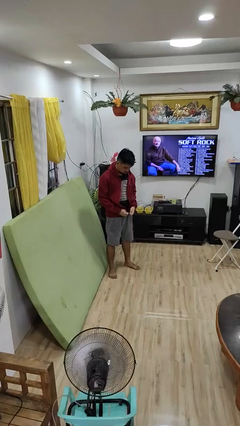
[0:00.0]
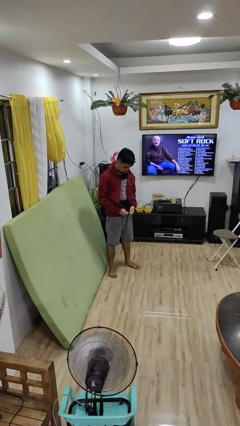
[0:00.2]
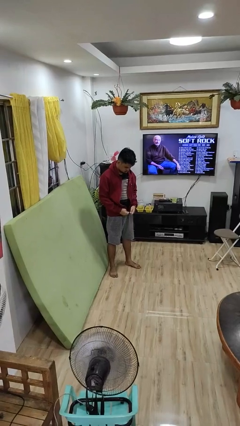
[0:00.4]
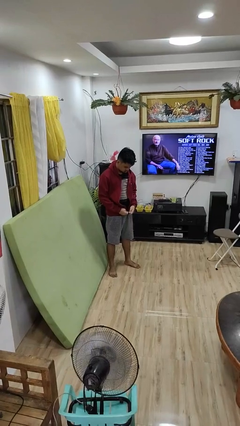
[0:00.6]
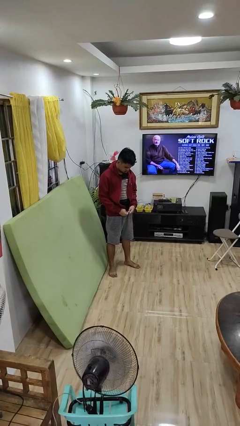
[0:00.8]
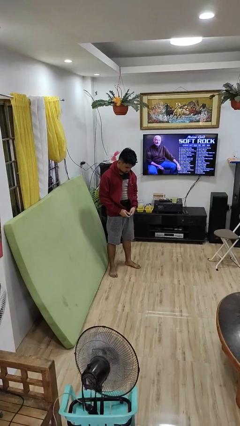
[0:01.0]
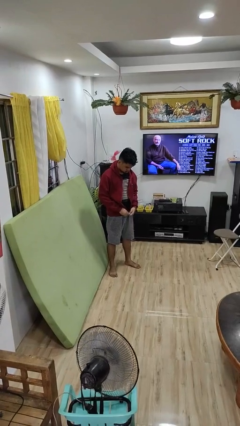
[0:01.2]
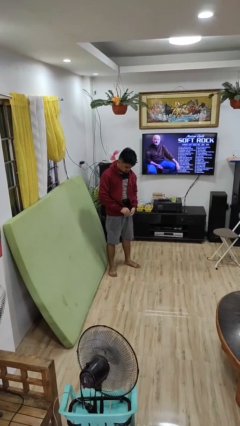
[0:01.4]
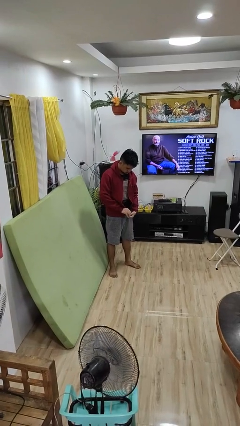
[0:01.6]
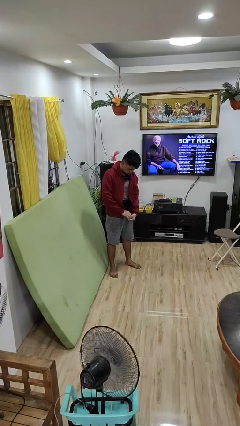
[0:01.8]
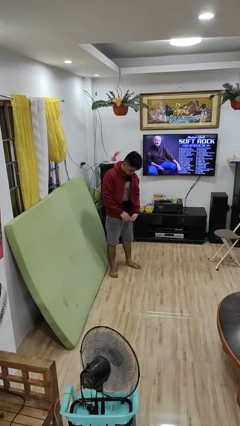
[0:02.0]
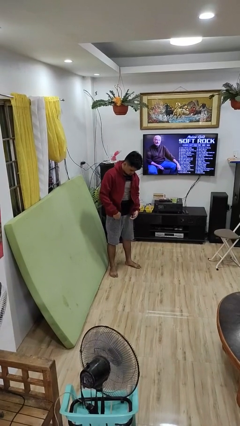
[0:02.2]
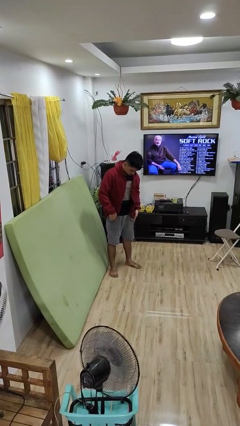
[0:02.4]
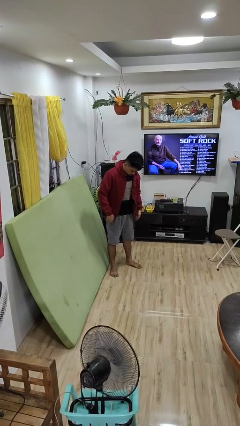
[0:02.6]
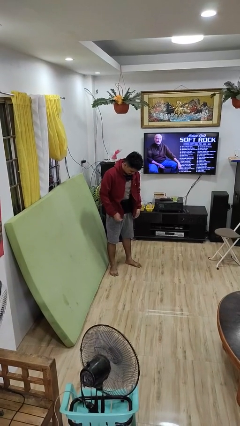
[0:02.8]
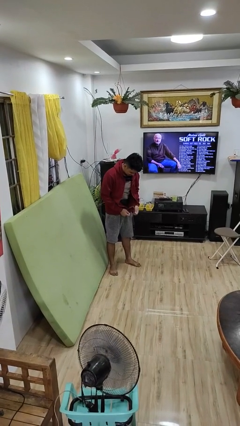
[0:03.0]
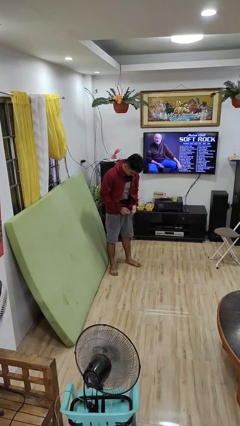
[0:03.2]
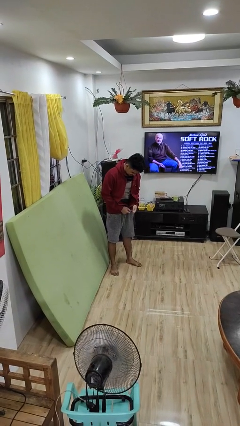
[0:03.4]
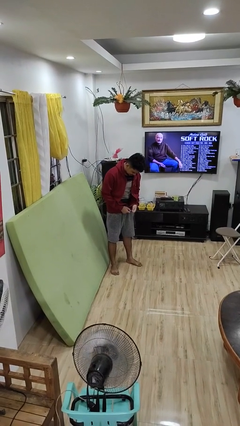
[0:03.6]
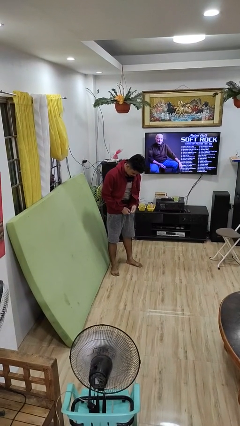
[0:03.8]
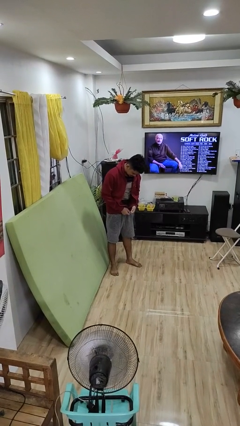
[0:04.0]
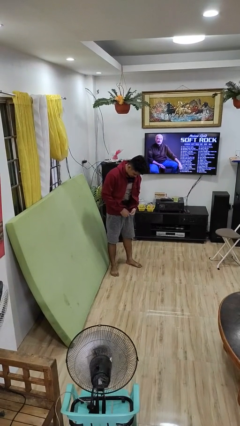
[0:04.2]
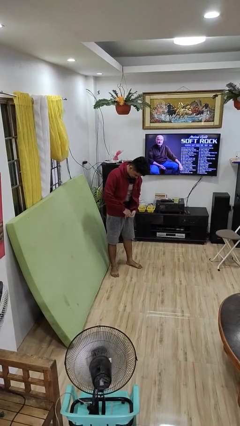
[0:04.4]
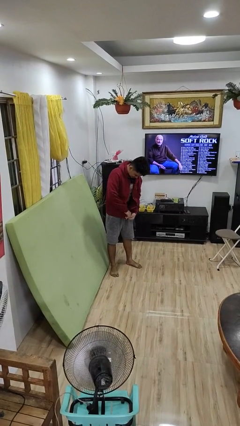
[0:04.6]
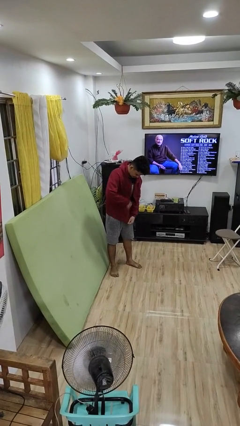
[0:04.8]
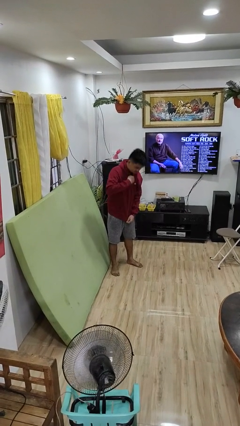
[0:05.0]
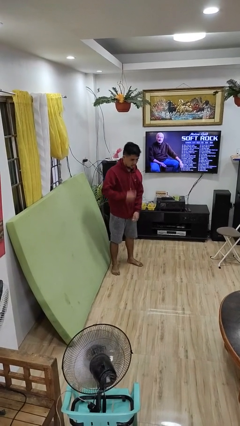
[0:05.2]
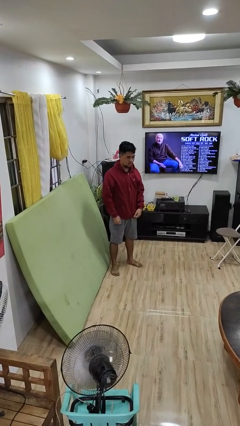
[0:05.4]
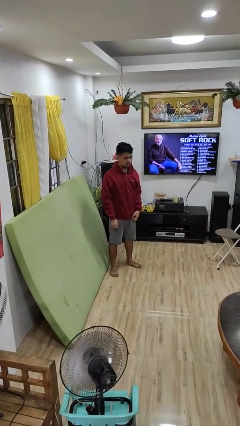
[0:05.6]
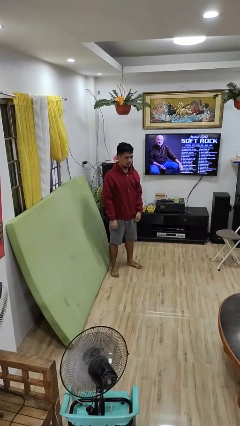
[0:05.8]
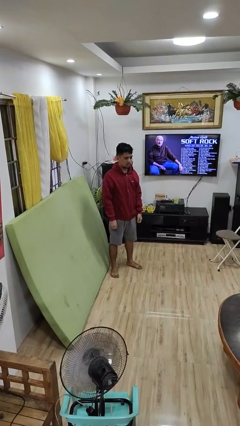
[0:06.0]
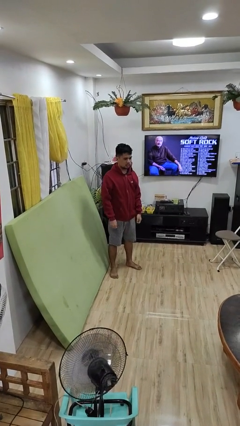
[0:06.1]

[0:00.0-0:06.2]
person zips up jacket

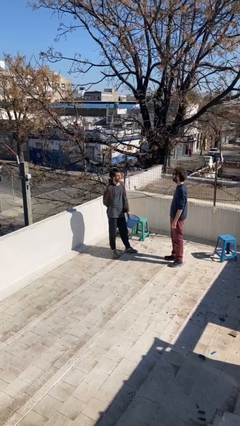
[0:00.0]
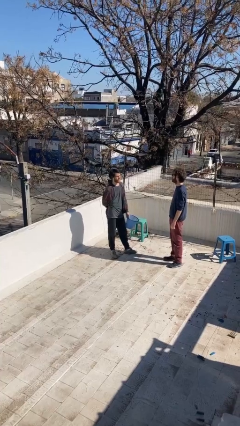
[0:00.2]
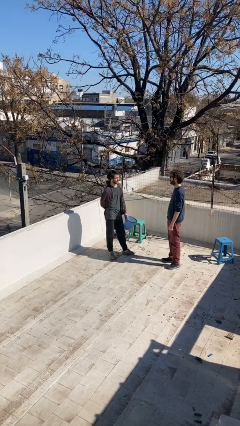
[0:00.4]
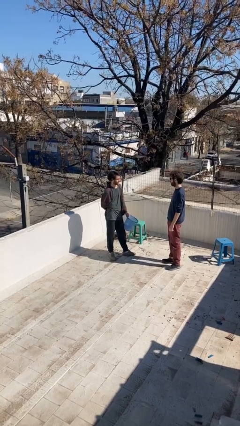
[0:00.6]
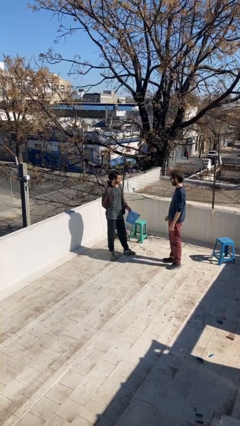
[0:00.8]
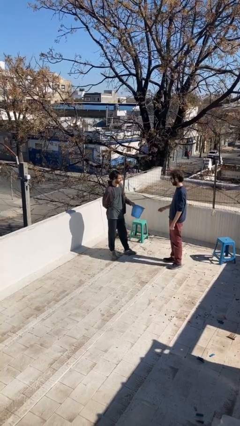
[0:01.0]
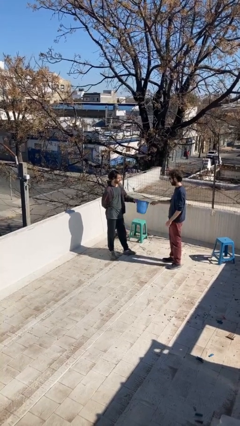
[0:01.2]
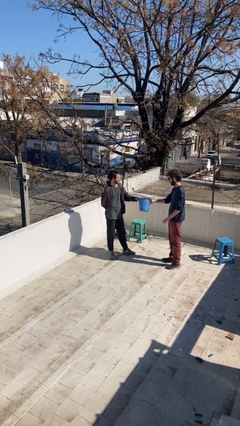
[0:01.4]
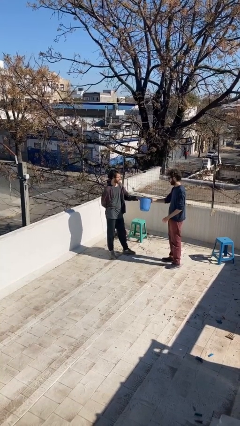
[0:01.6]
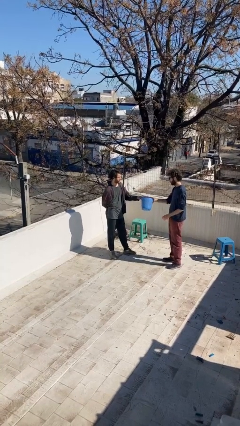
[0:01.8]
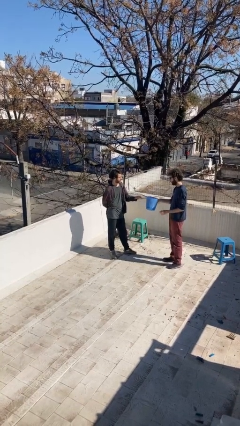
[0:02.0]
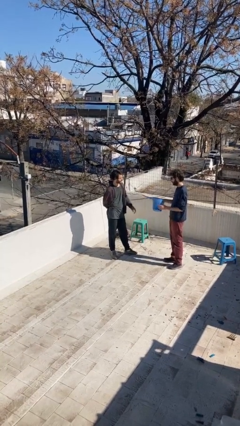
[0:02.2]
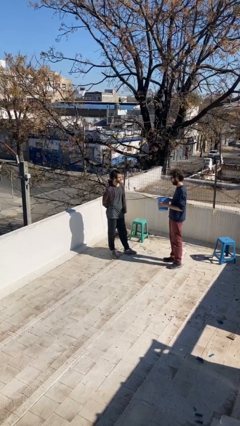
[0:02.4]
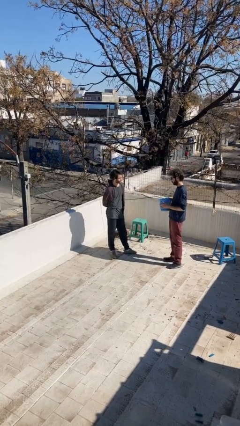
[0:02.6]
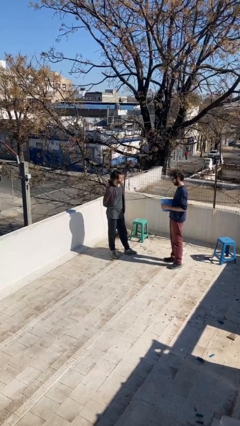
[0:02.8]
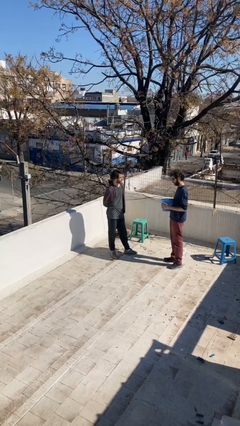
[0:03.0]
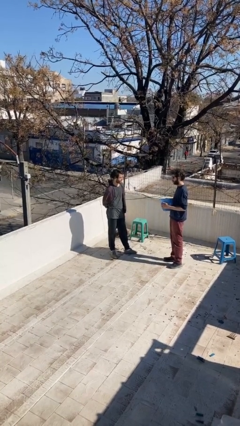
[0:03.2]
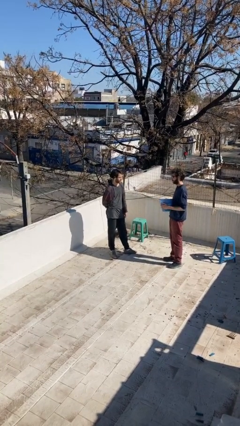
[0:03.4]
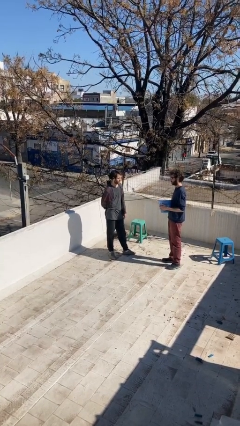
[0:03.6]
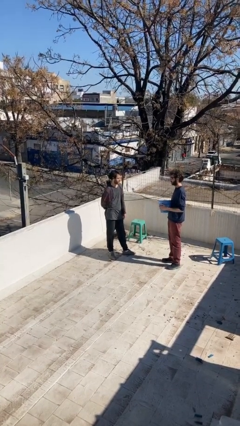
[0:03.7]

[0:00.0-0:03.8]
person transfers object to person

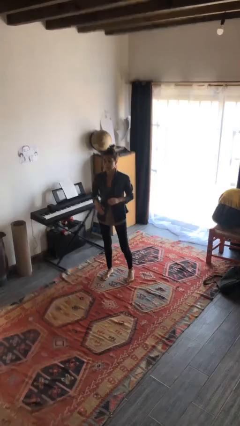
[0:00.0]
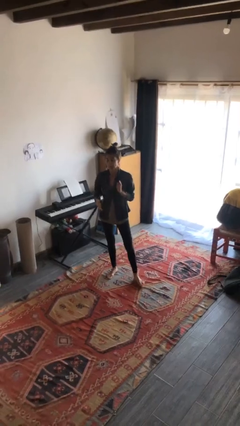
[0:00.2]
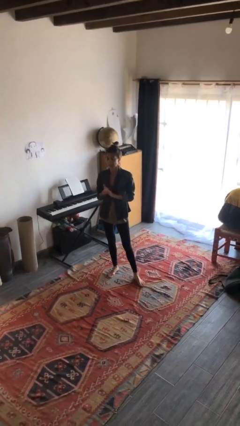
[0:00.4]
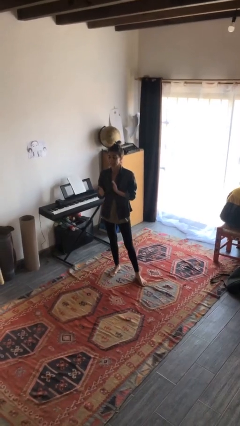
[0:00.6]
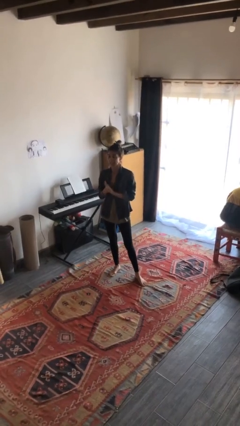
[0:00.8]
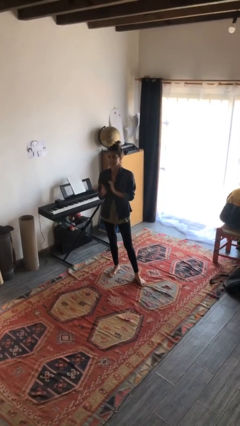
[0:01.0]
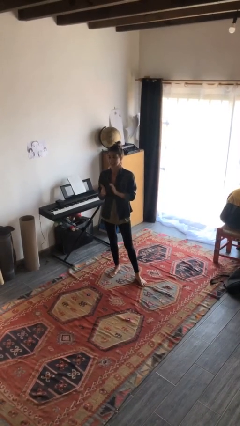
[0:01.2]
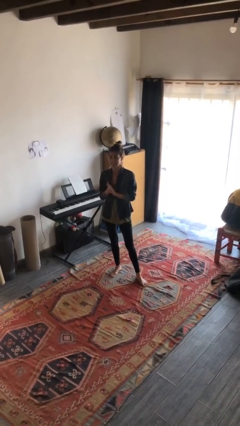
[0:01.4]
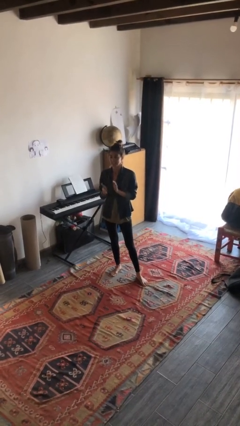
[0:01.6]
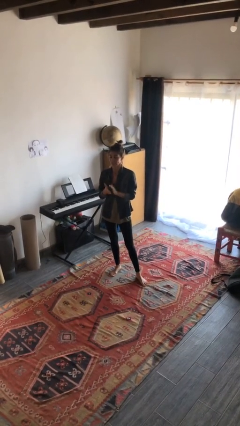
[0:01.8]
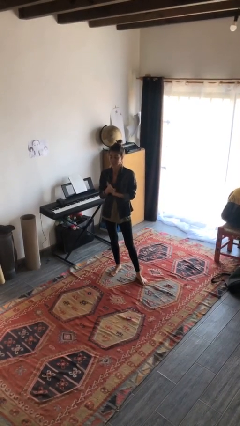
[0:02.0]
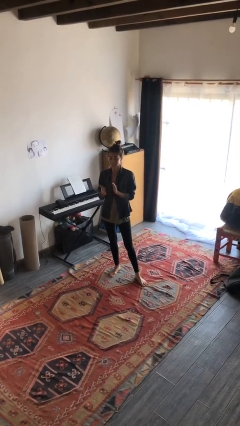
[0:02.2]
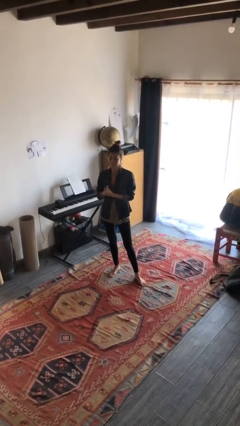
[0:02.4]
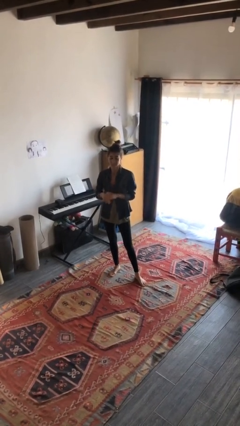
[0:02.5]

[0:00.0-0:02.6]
person claps hands

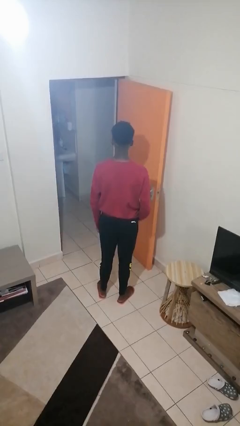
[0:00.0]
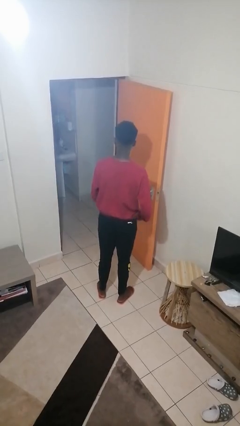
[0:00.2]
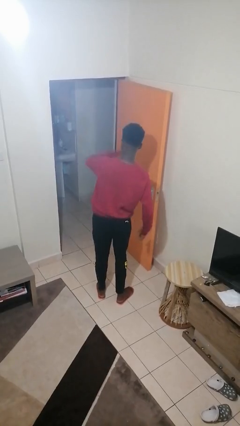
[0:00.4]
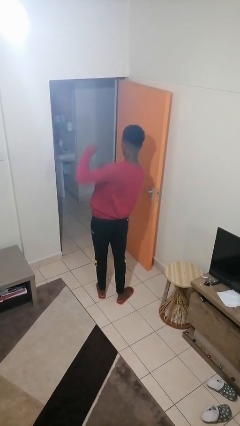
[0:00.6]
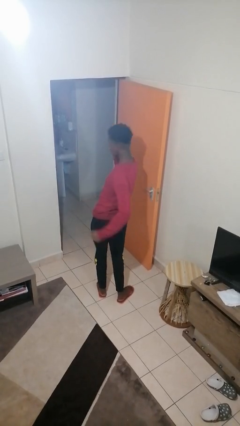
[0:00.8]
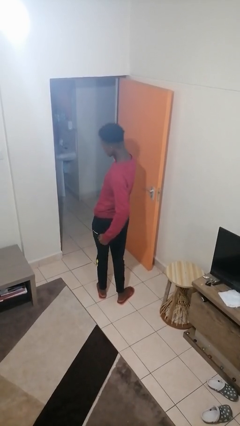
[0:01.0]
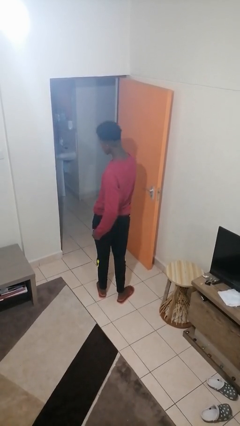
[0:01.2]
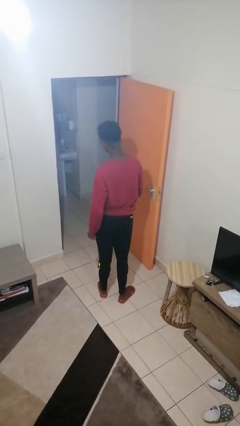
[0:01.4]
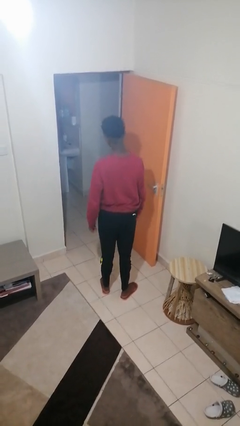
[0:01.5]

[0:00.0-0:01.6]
person punches

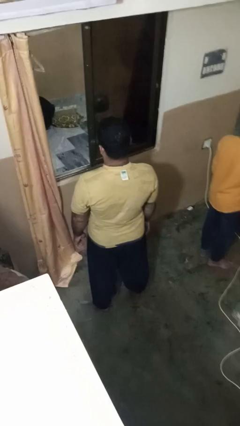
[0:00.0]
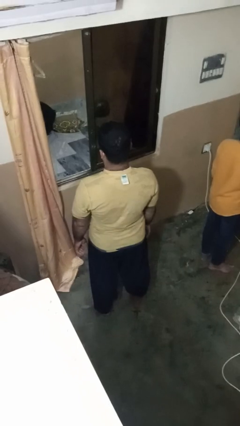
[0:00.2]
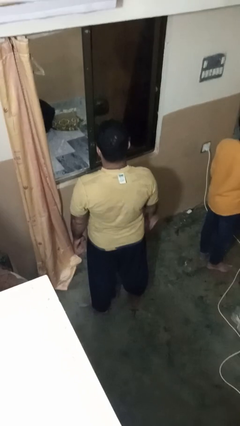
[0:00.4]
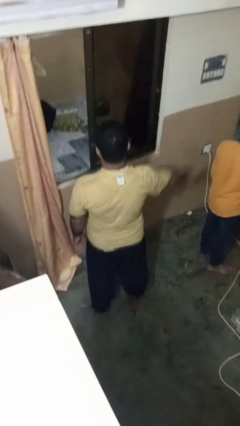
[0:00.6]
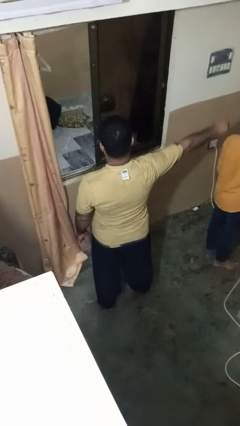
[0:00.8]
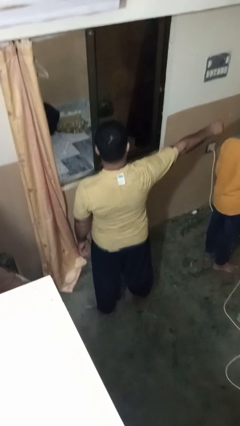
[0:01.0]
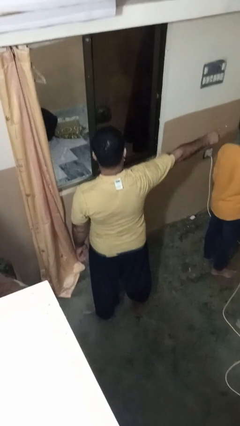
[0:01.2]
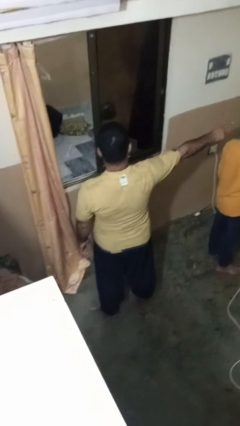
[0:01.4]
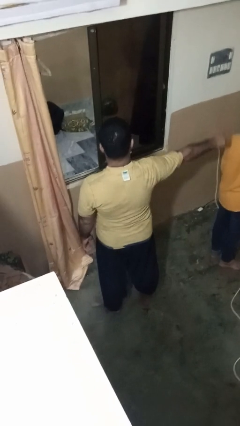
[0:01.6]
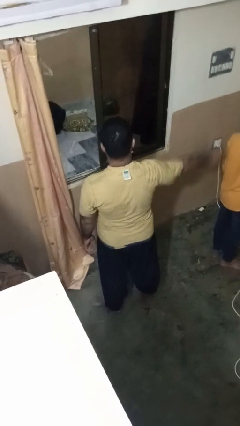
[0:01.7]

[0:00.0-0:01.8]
person points at person

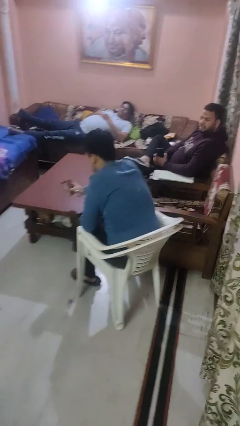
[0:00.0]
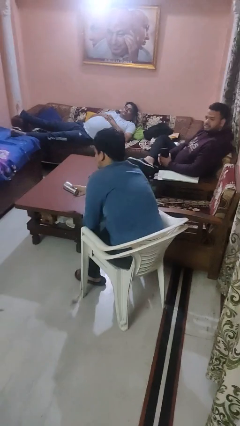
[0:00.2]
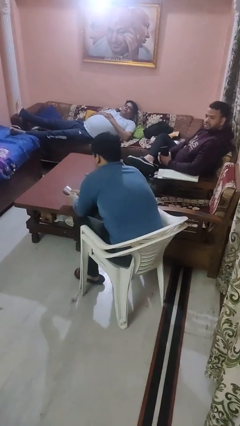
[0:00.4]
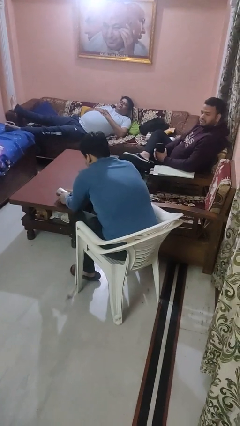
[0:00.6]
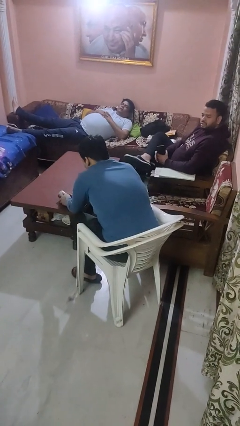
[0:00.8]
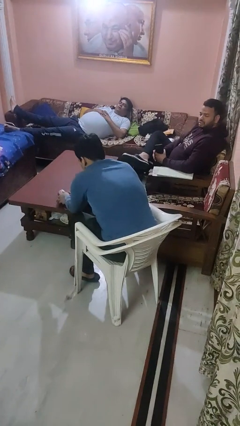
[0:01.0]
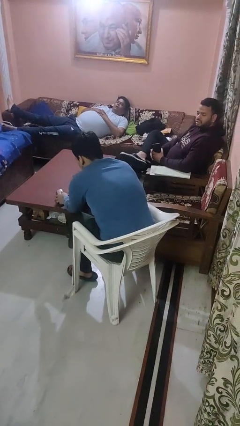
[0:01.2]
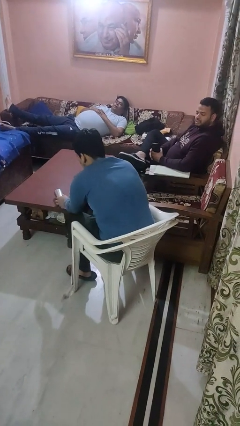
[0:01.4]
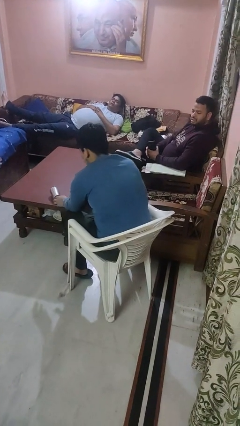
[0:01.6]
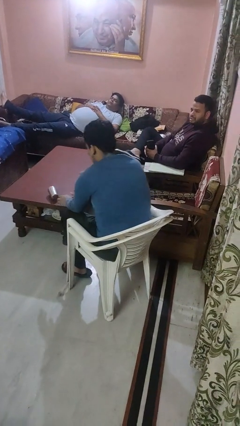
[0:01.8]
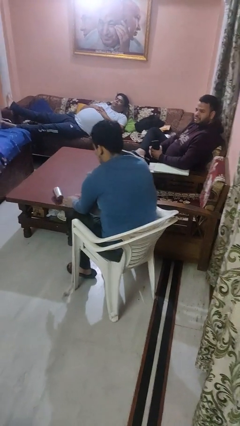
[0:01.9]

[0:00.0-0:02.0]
person spills on table
